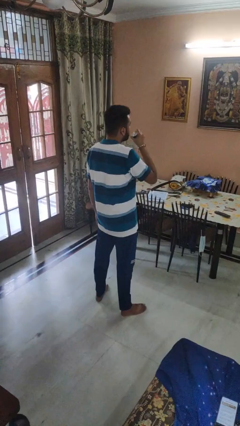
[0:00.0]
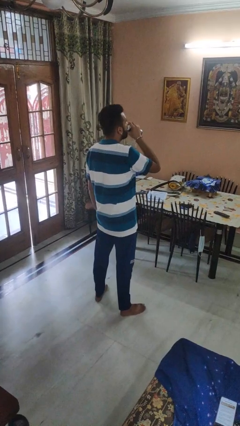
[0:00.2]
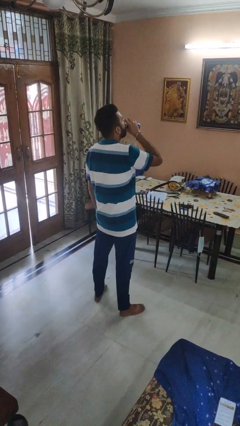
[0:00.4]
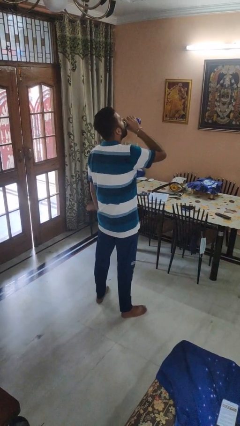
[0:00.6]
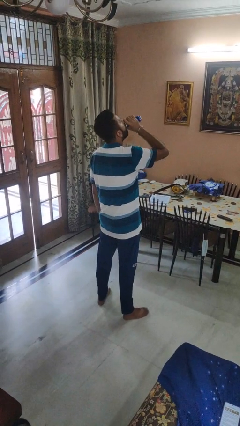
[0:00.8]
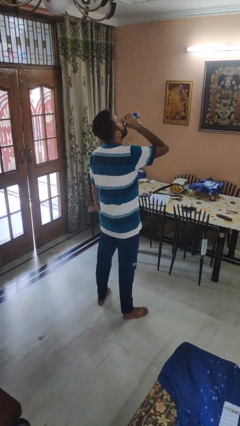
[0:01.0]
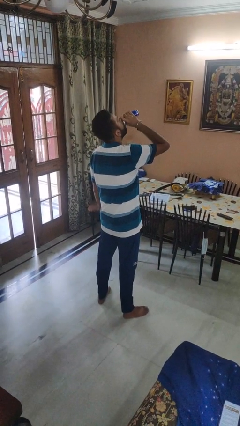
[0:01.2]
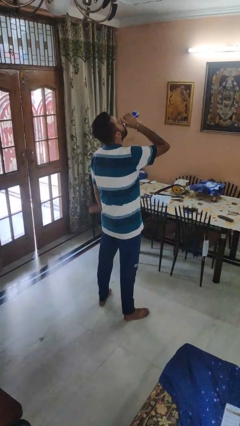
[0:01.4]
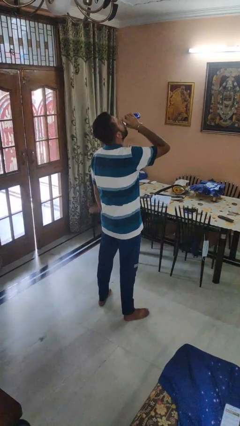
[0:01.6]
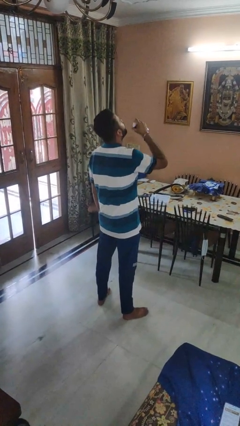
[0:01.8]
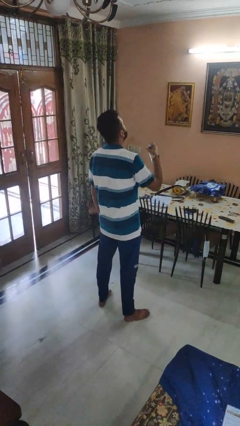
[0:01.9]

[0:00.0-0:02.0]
person drinks from beverage can

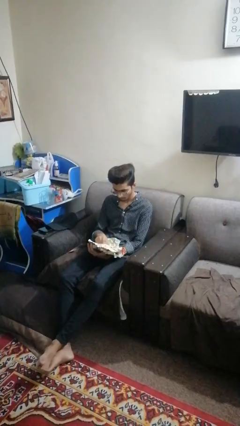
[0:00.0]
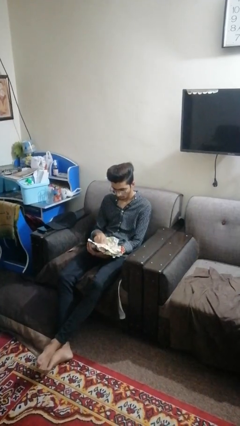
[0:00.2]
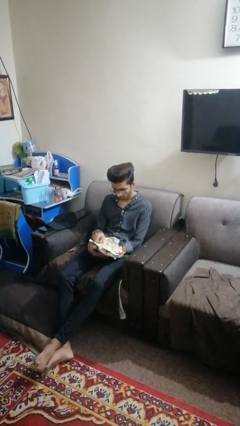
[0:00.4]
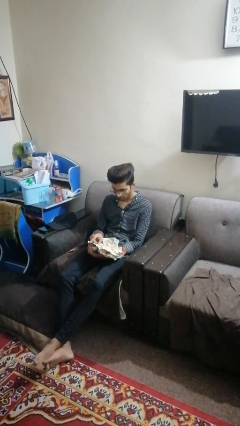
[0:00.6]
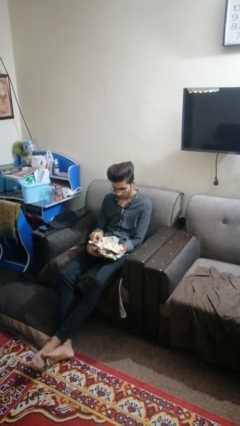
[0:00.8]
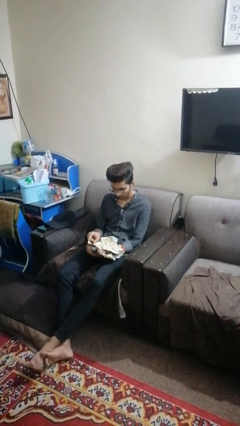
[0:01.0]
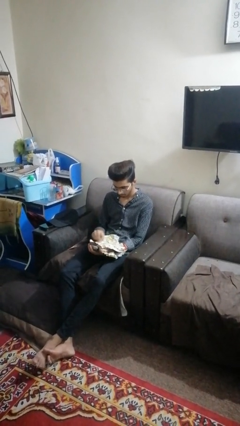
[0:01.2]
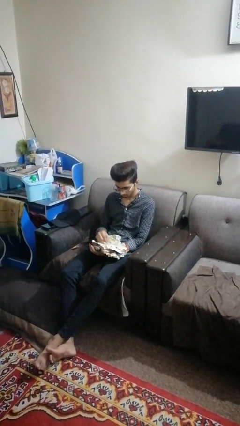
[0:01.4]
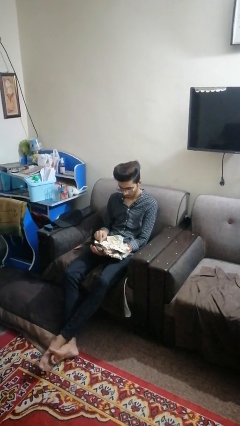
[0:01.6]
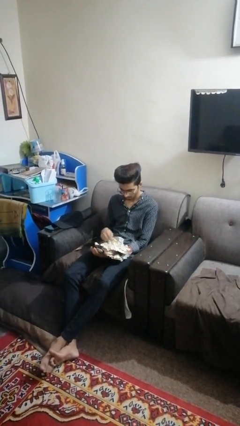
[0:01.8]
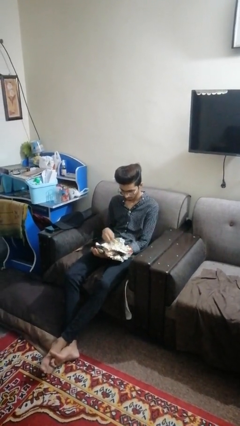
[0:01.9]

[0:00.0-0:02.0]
person reads newspaper

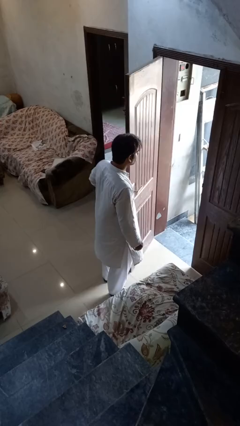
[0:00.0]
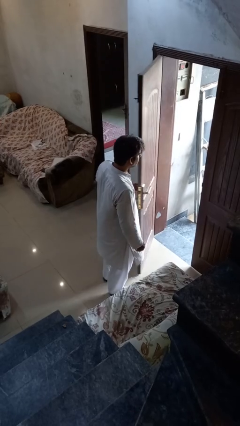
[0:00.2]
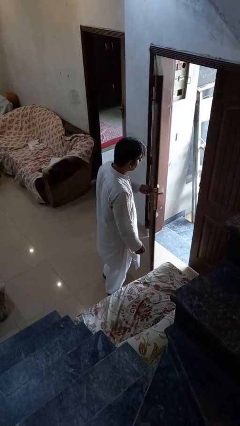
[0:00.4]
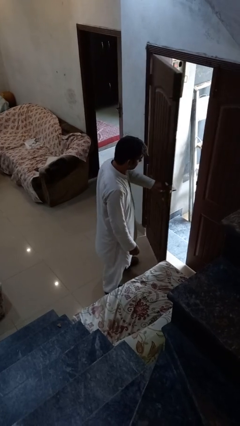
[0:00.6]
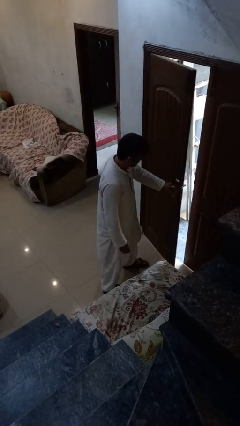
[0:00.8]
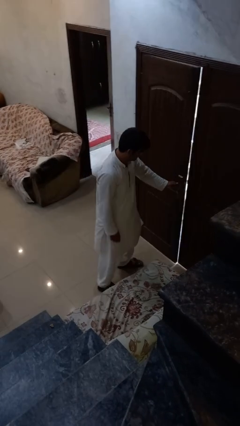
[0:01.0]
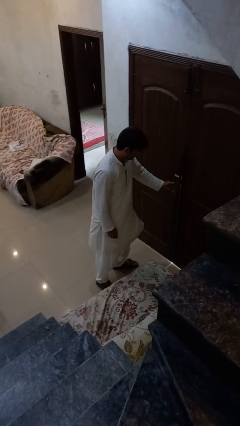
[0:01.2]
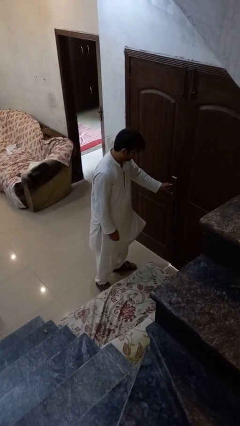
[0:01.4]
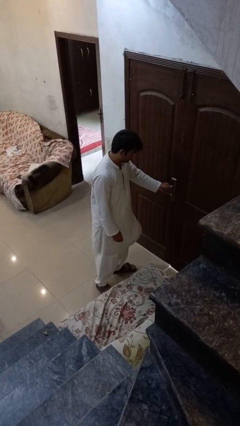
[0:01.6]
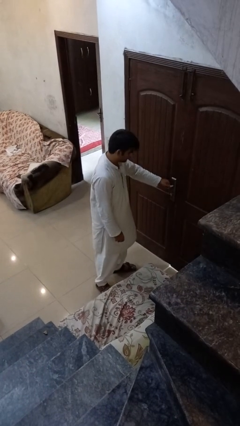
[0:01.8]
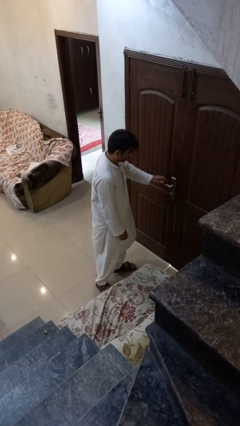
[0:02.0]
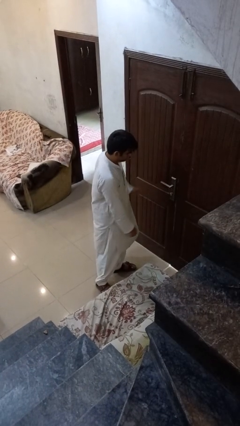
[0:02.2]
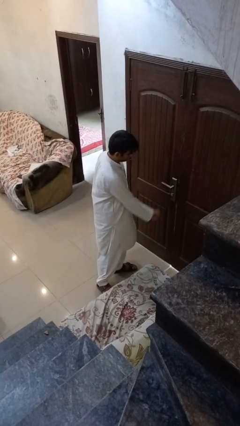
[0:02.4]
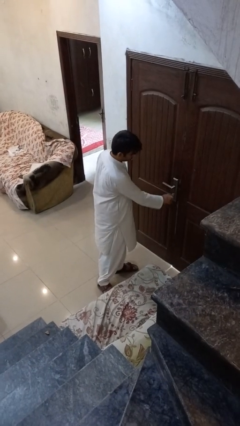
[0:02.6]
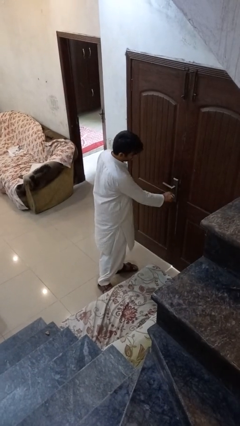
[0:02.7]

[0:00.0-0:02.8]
person closes facility door

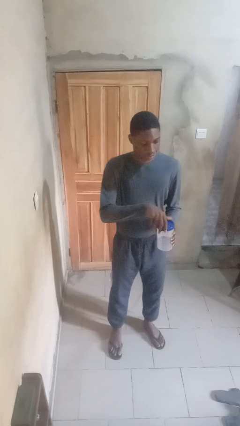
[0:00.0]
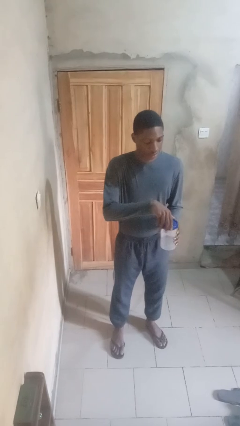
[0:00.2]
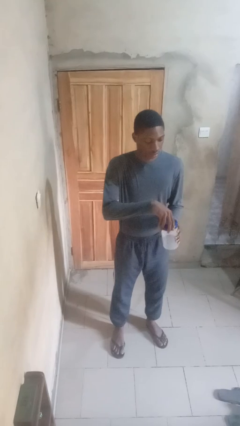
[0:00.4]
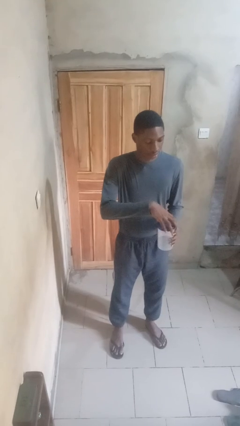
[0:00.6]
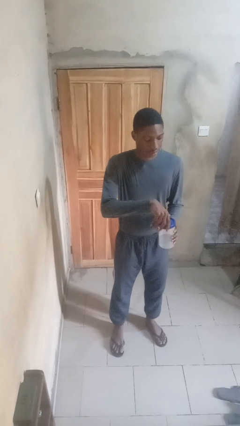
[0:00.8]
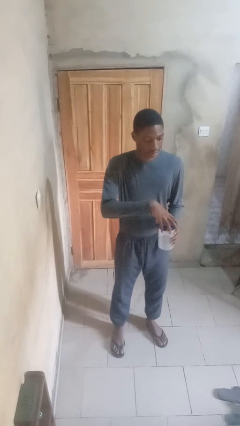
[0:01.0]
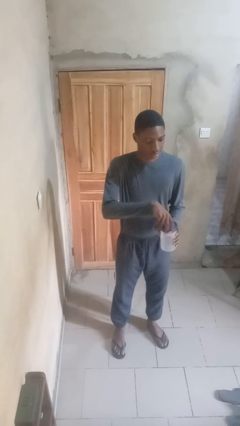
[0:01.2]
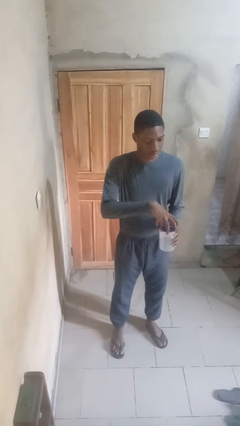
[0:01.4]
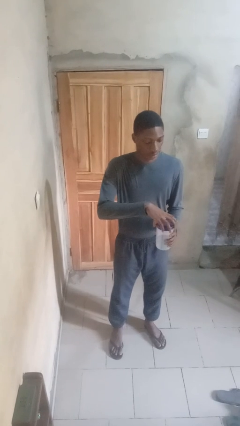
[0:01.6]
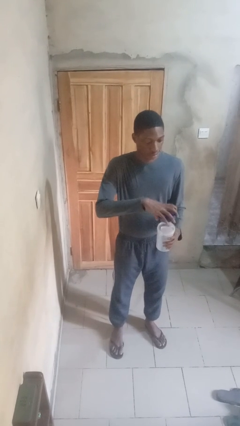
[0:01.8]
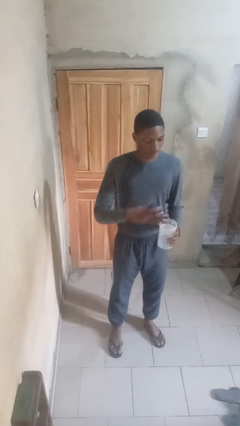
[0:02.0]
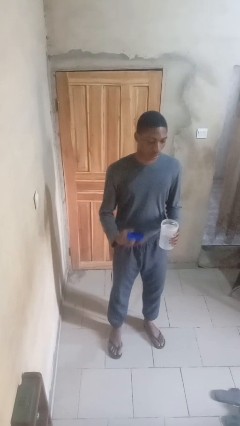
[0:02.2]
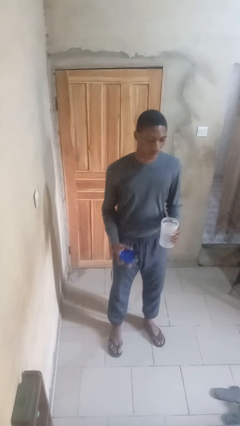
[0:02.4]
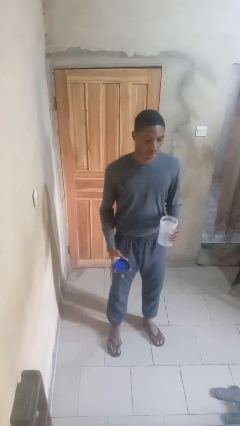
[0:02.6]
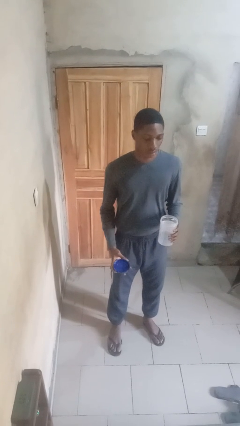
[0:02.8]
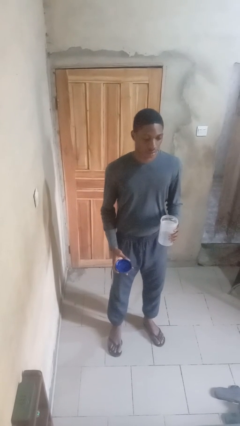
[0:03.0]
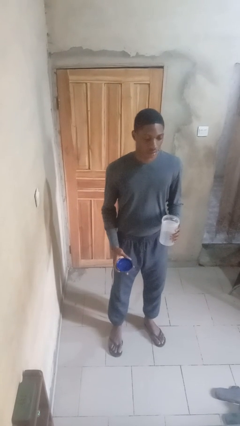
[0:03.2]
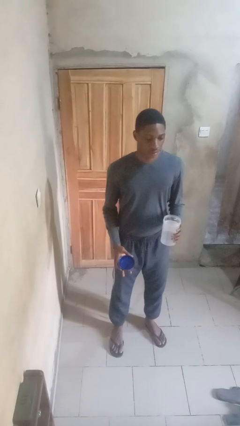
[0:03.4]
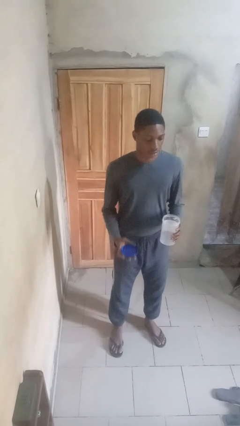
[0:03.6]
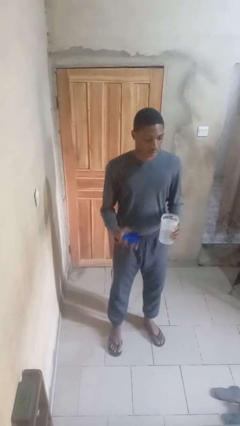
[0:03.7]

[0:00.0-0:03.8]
person opens jar

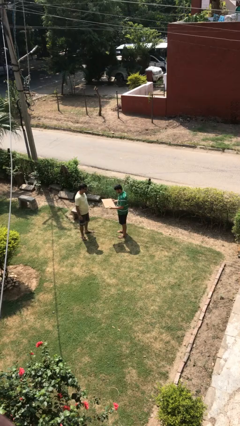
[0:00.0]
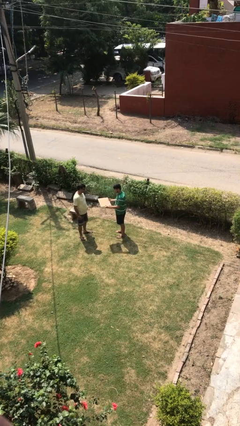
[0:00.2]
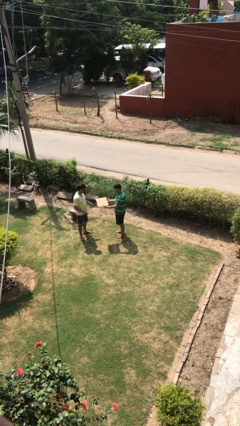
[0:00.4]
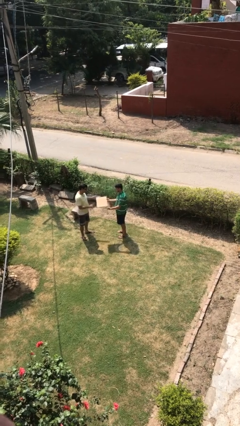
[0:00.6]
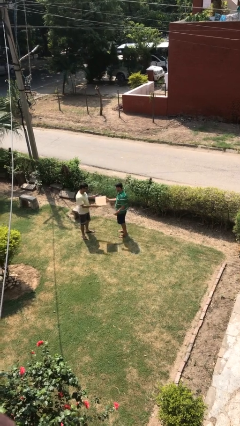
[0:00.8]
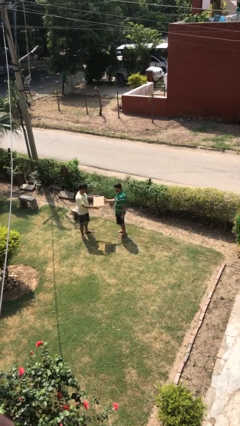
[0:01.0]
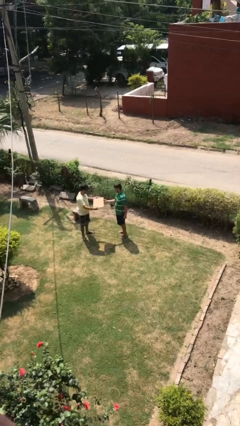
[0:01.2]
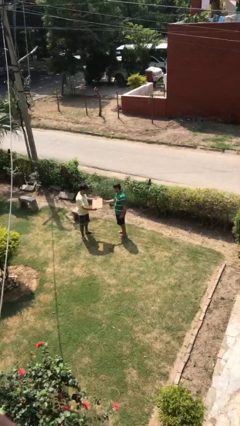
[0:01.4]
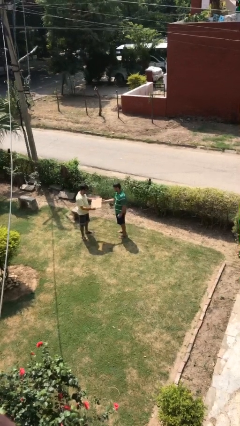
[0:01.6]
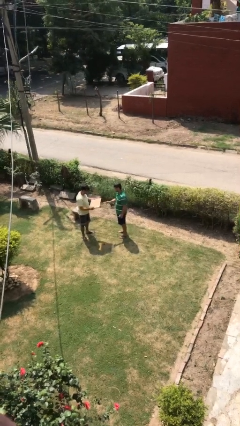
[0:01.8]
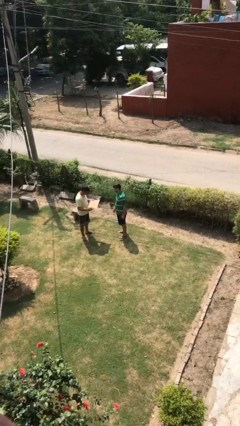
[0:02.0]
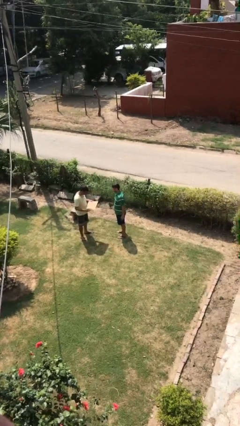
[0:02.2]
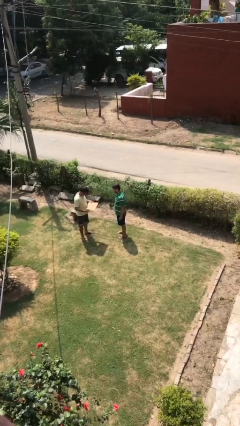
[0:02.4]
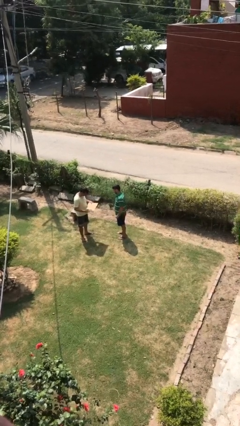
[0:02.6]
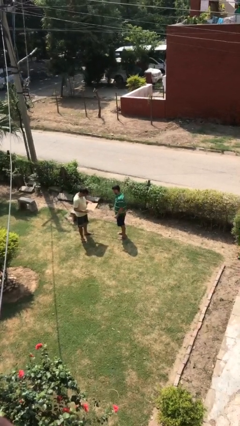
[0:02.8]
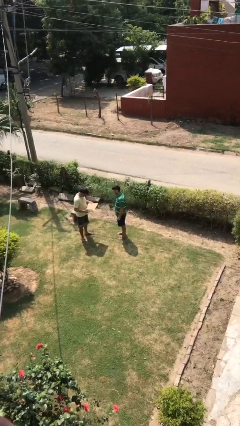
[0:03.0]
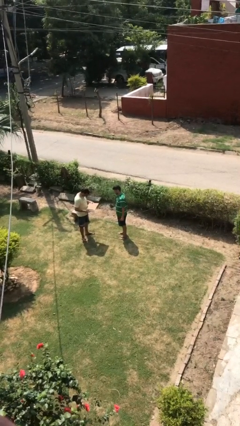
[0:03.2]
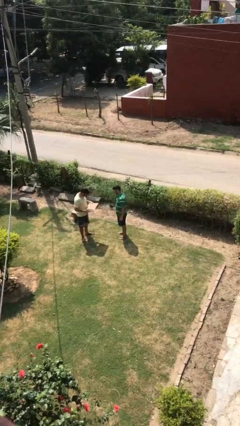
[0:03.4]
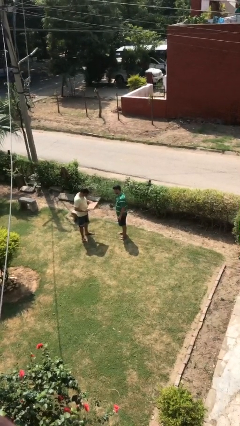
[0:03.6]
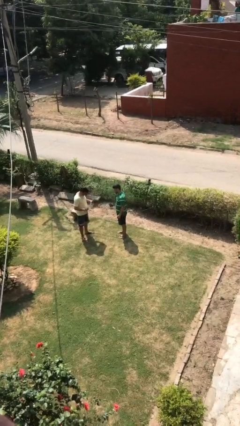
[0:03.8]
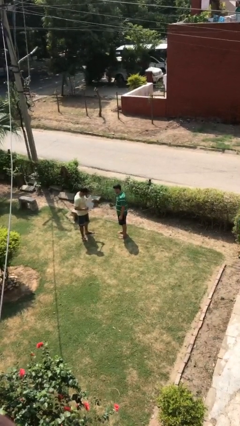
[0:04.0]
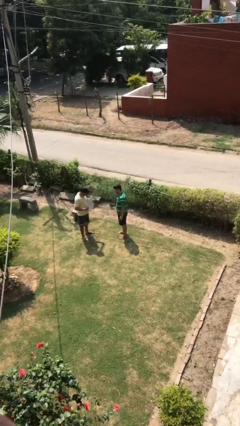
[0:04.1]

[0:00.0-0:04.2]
person transfers object to person

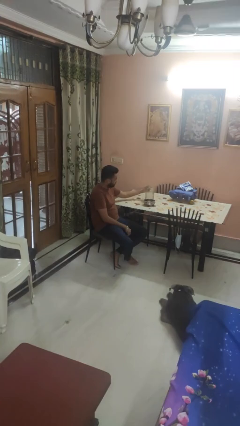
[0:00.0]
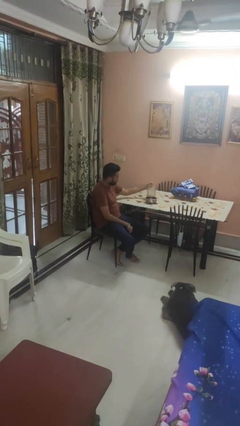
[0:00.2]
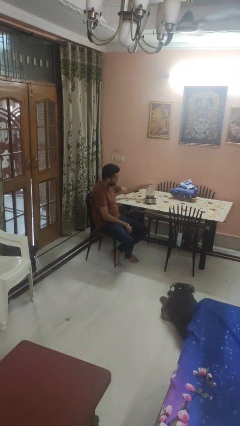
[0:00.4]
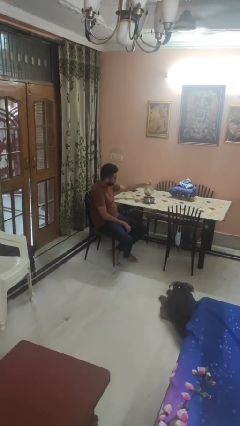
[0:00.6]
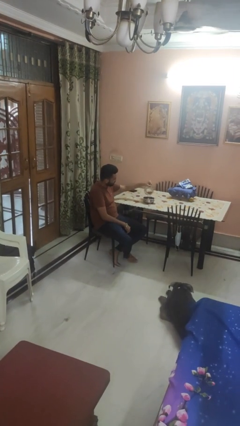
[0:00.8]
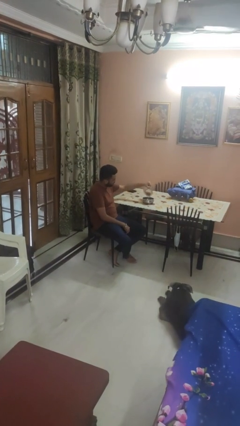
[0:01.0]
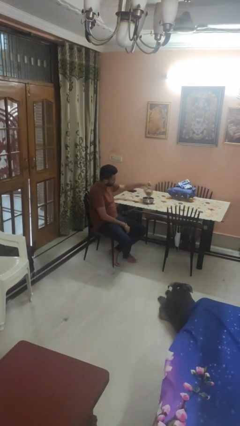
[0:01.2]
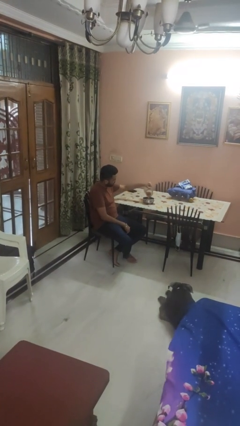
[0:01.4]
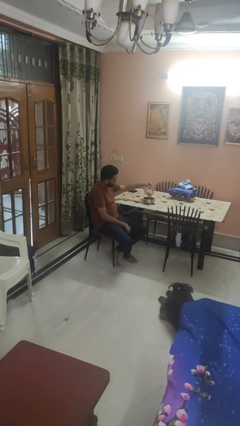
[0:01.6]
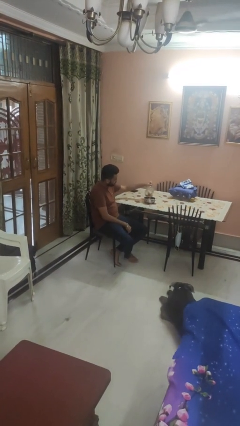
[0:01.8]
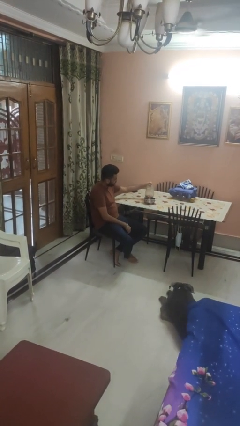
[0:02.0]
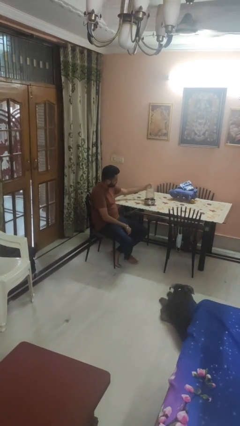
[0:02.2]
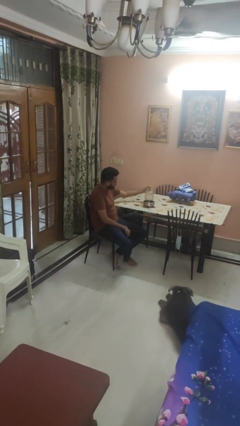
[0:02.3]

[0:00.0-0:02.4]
person pours into bowl

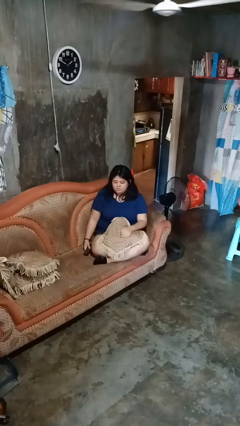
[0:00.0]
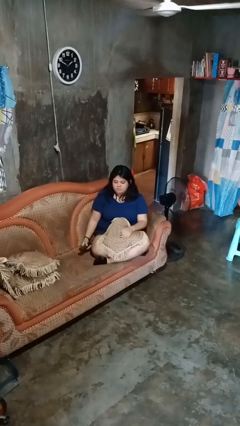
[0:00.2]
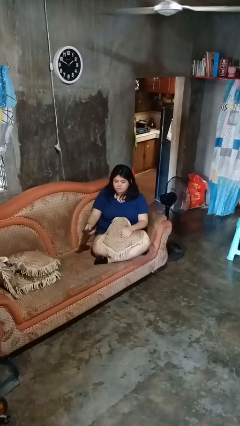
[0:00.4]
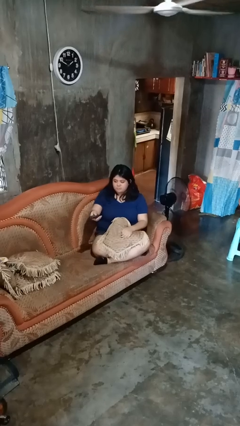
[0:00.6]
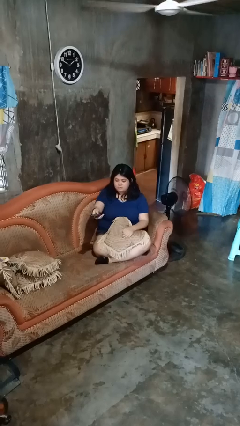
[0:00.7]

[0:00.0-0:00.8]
person uses television remote
